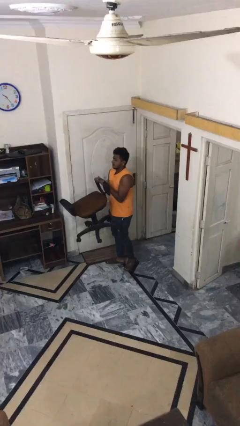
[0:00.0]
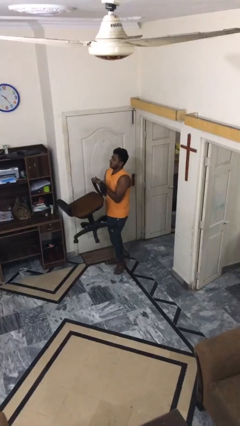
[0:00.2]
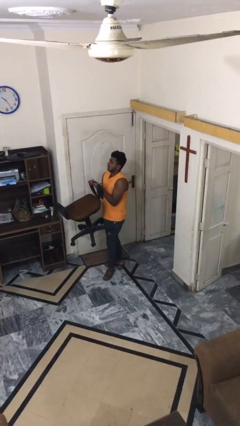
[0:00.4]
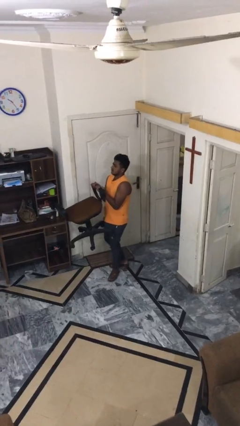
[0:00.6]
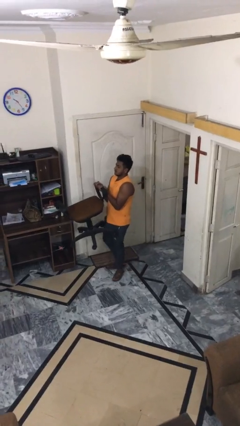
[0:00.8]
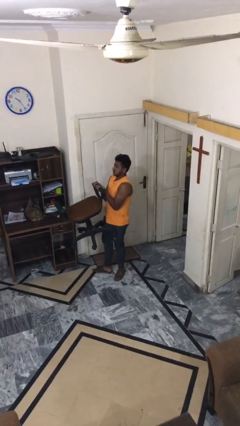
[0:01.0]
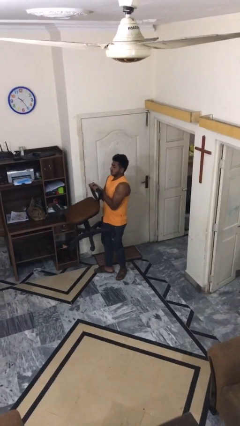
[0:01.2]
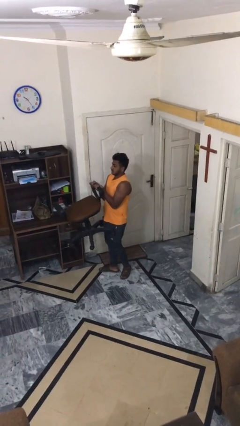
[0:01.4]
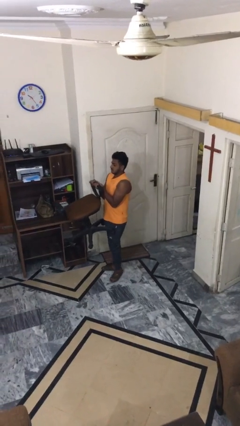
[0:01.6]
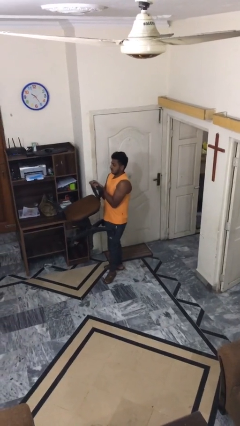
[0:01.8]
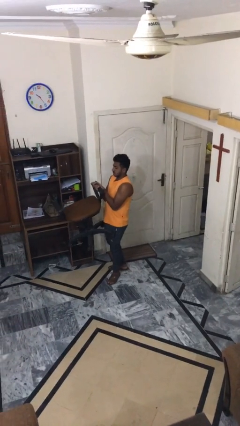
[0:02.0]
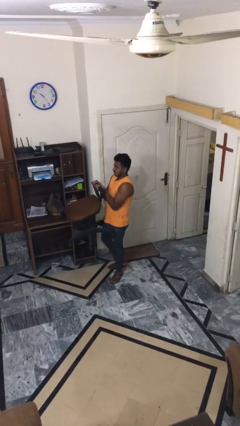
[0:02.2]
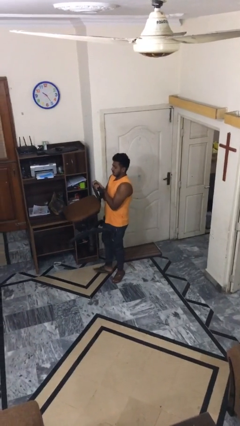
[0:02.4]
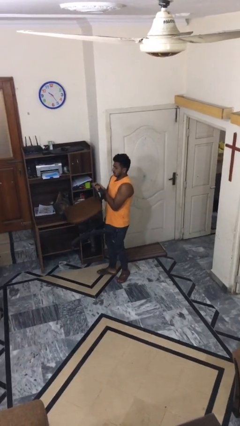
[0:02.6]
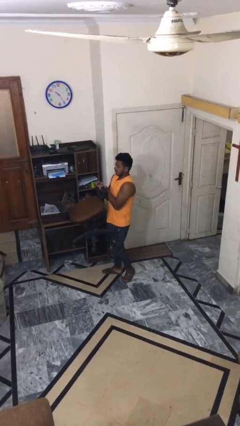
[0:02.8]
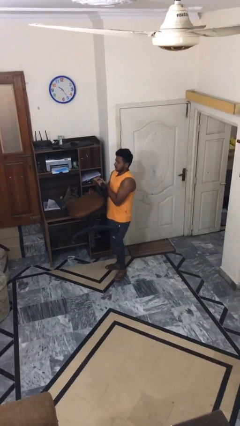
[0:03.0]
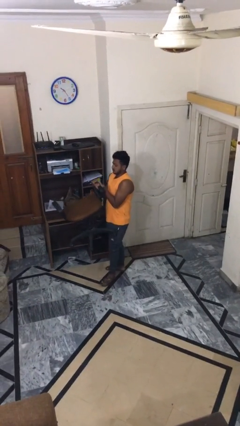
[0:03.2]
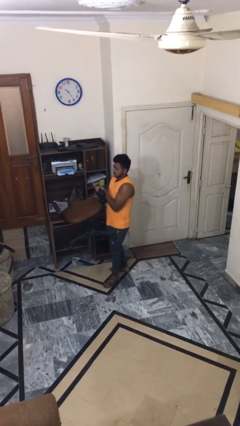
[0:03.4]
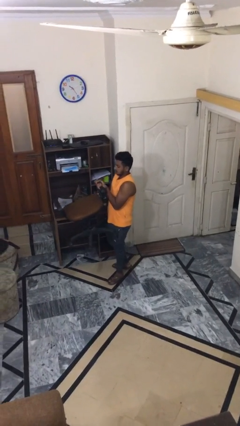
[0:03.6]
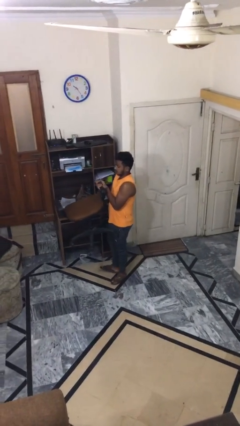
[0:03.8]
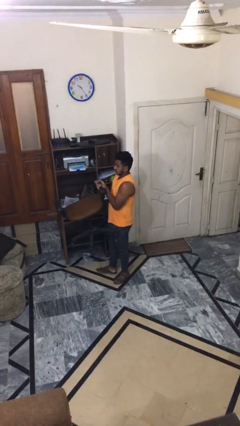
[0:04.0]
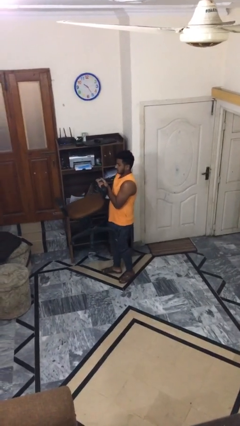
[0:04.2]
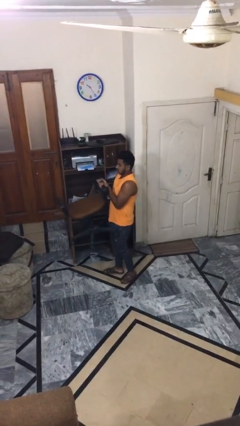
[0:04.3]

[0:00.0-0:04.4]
person carries heavy object

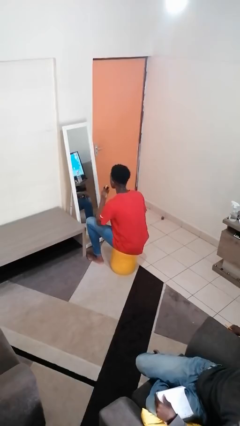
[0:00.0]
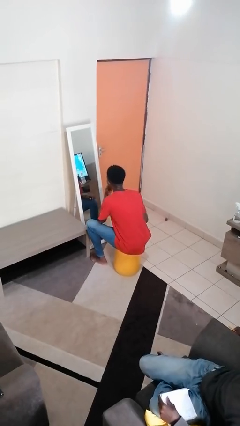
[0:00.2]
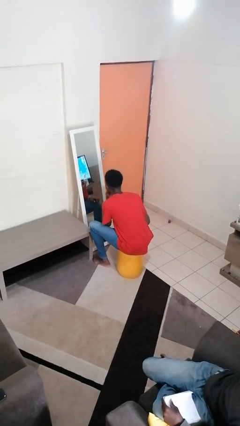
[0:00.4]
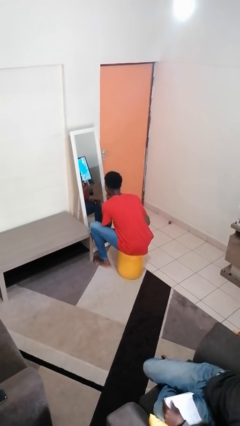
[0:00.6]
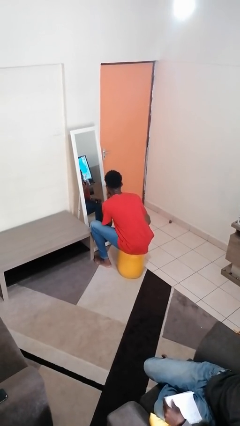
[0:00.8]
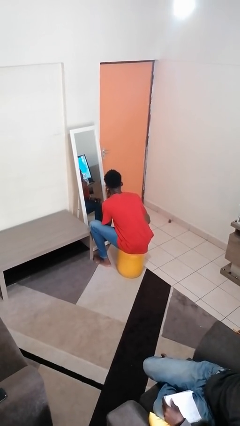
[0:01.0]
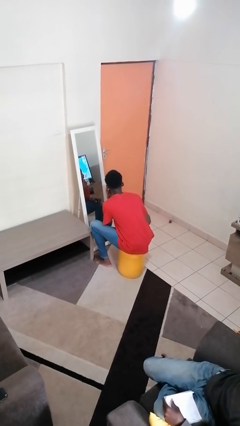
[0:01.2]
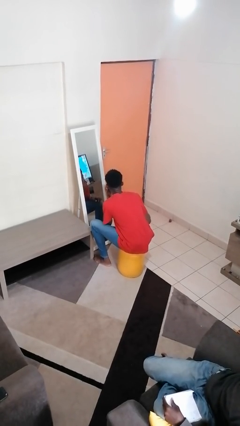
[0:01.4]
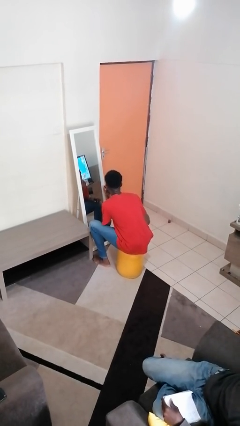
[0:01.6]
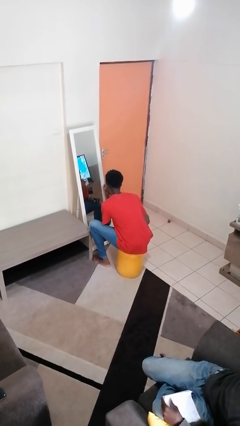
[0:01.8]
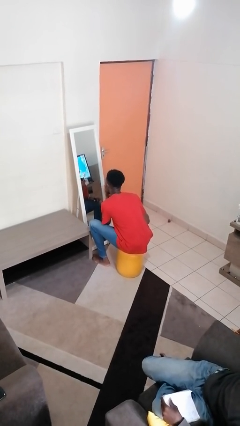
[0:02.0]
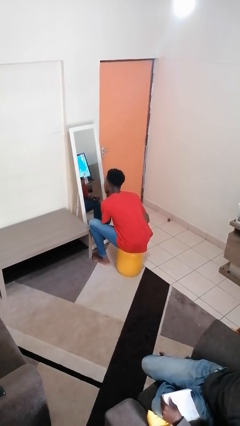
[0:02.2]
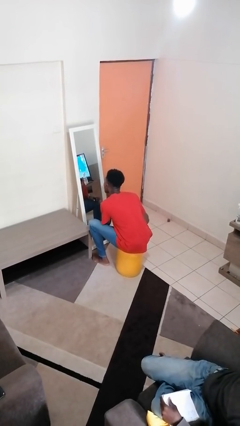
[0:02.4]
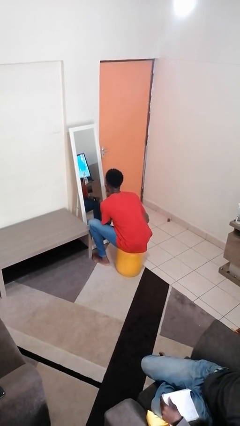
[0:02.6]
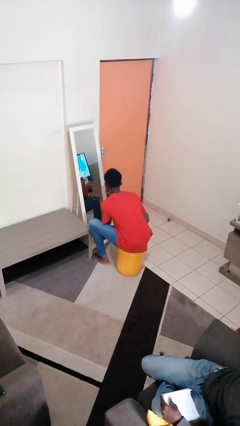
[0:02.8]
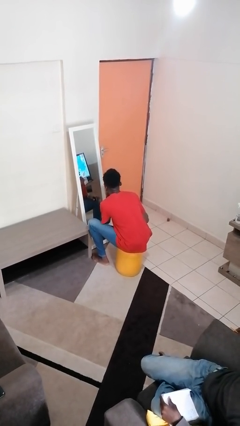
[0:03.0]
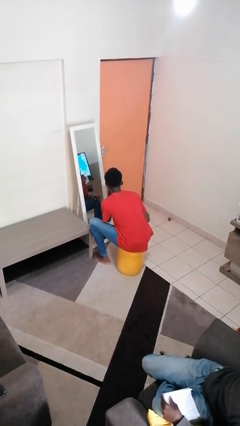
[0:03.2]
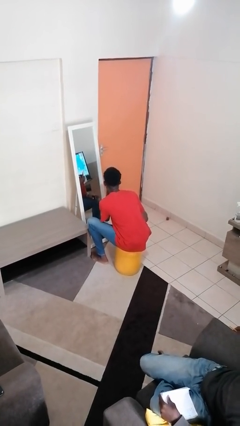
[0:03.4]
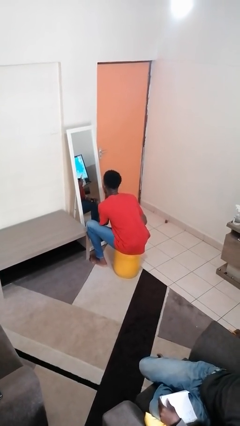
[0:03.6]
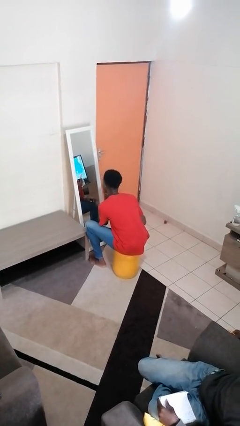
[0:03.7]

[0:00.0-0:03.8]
person applies lip makeup

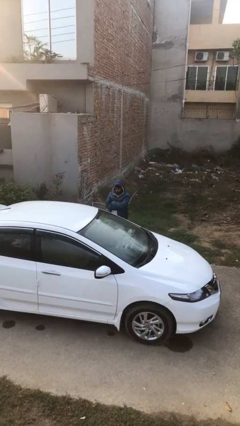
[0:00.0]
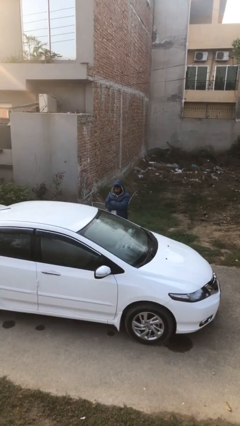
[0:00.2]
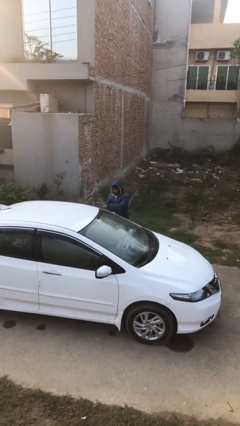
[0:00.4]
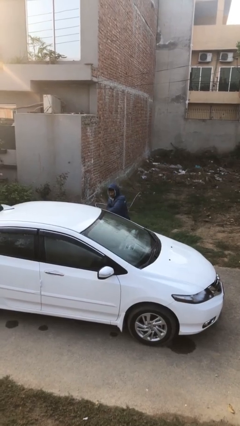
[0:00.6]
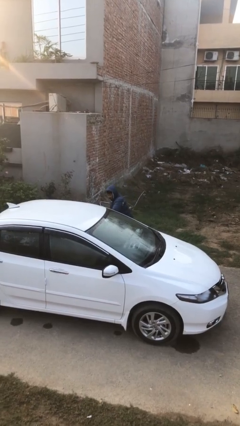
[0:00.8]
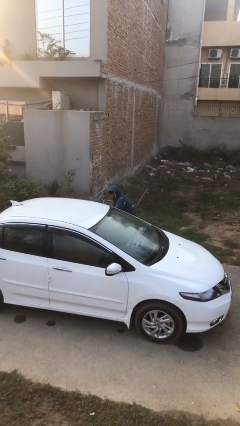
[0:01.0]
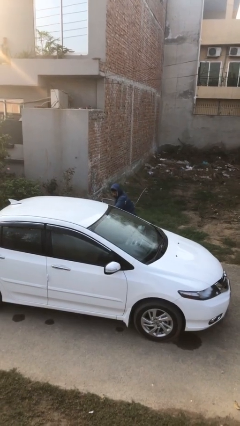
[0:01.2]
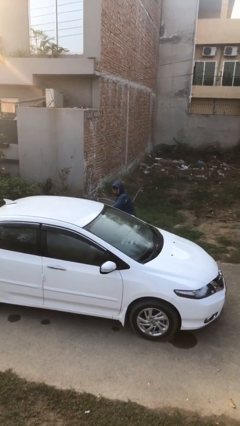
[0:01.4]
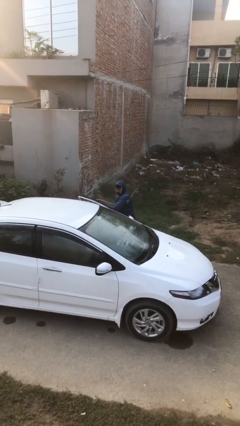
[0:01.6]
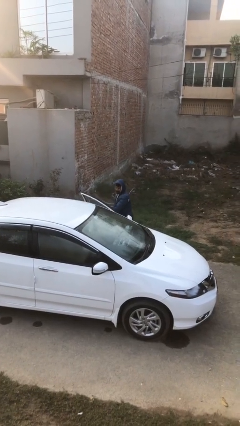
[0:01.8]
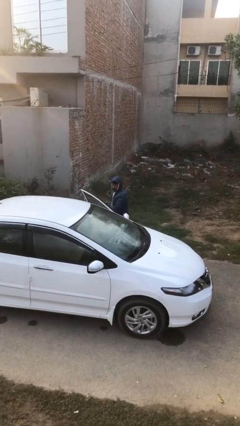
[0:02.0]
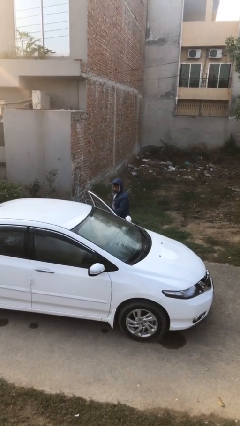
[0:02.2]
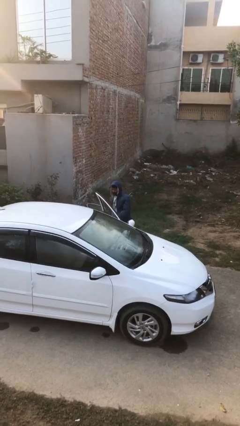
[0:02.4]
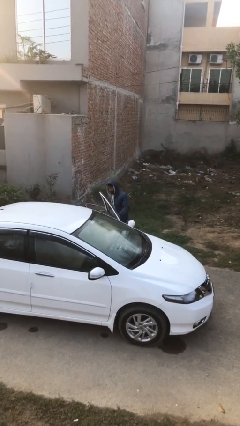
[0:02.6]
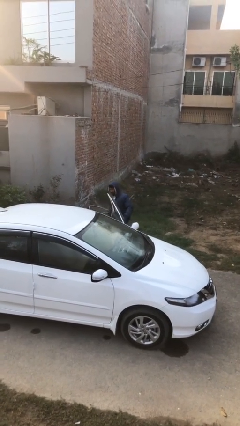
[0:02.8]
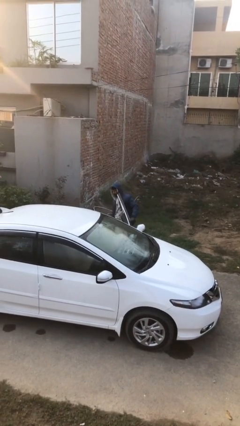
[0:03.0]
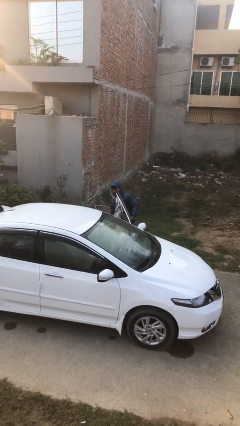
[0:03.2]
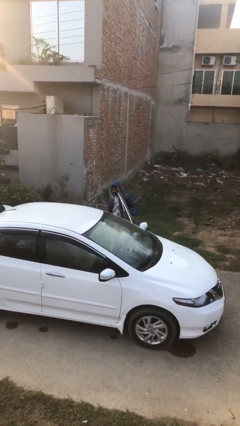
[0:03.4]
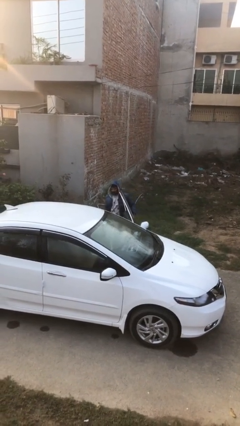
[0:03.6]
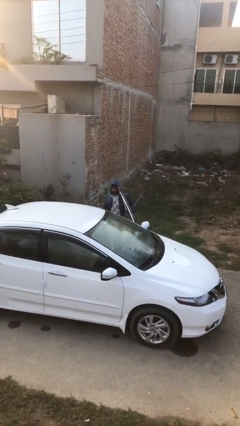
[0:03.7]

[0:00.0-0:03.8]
person opens car door

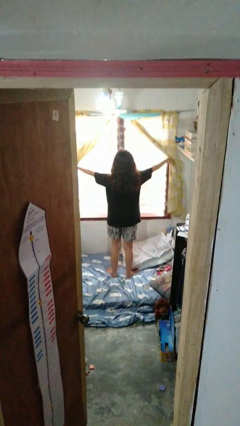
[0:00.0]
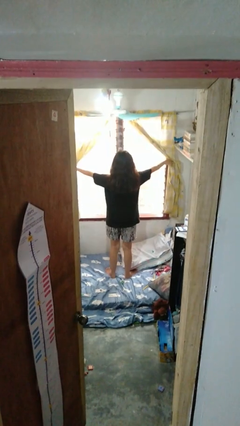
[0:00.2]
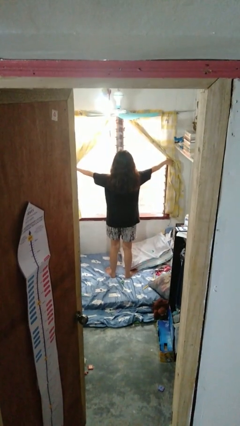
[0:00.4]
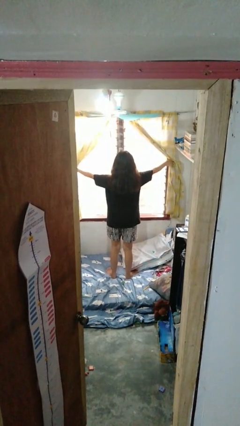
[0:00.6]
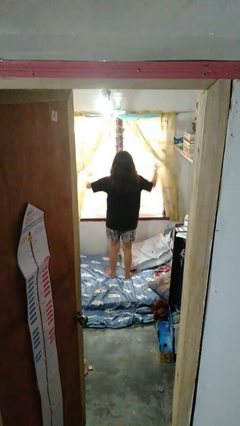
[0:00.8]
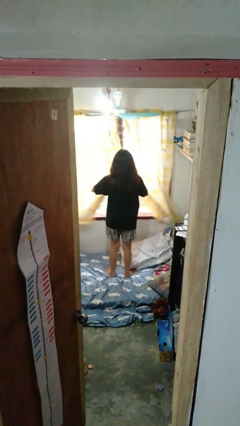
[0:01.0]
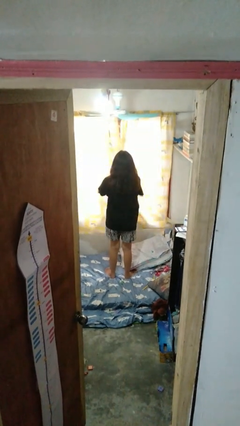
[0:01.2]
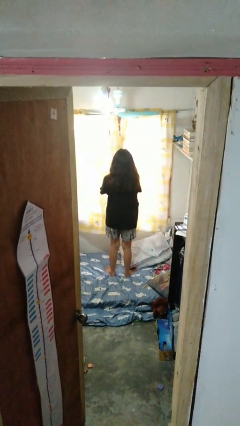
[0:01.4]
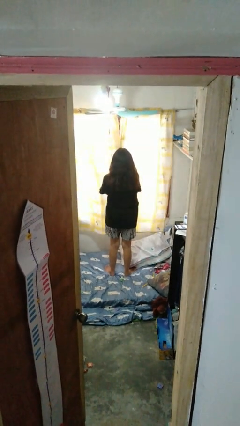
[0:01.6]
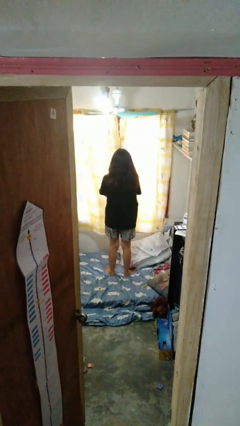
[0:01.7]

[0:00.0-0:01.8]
person closes curtains

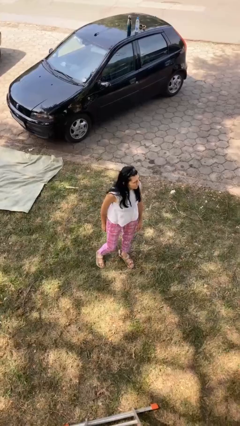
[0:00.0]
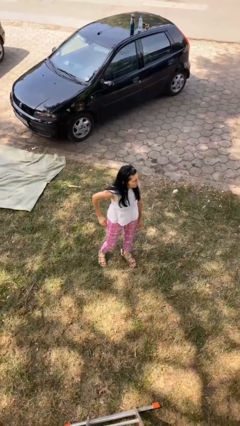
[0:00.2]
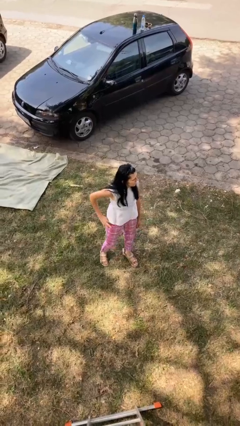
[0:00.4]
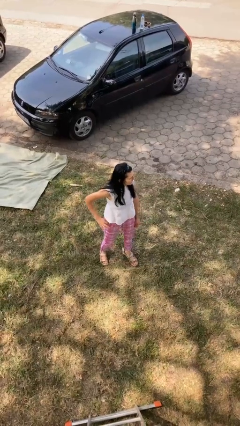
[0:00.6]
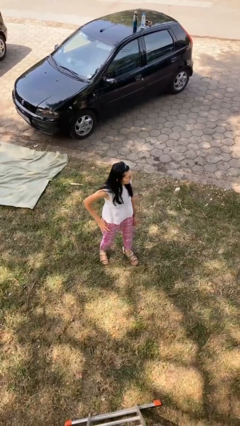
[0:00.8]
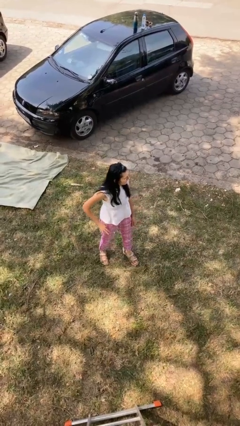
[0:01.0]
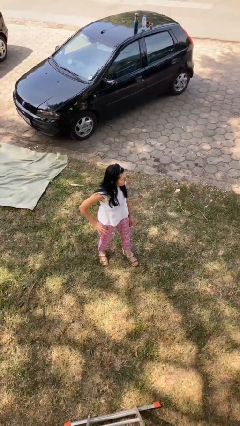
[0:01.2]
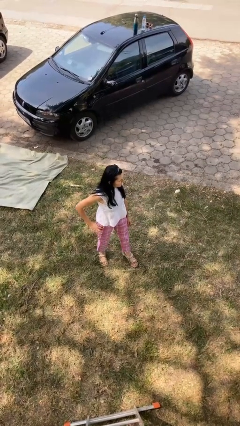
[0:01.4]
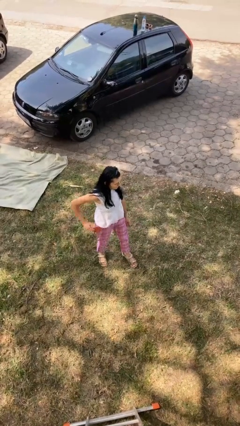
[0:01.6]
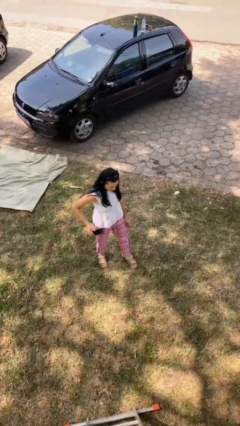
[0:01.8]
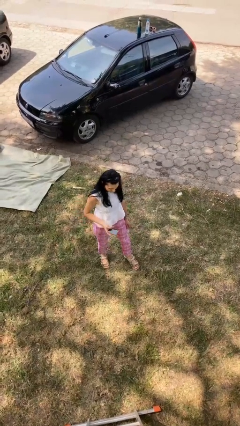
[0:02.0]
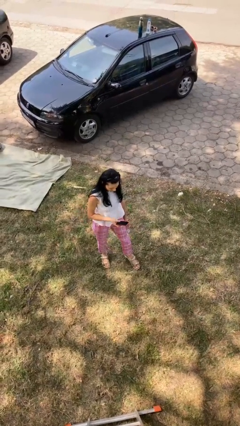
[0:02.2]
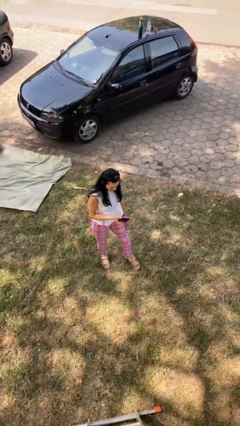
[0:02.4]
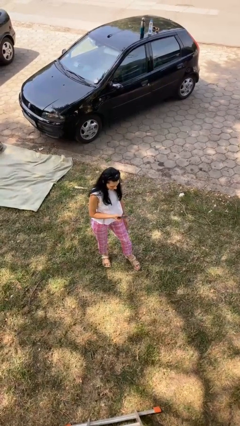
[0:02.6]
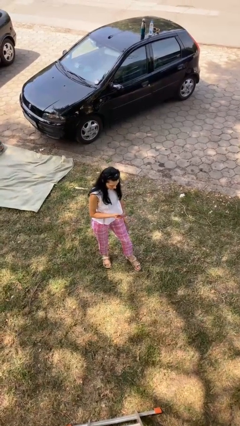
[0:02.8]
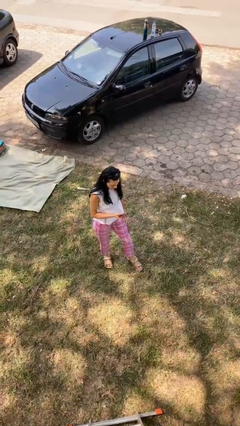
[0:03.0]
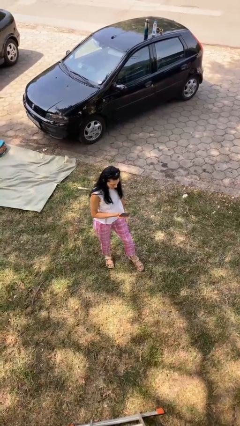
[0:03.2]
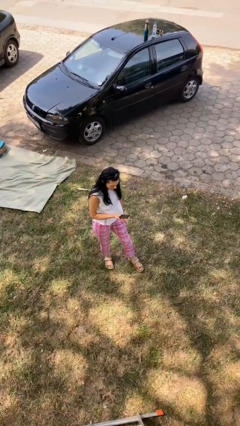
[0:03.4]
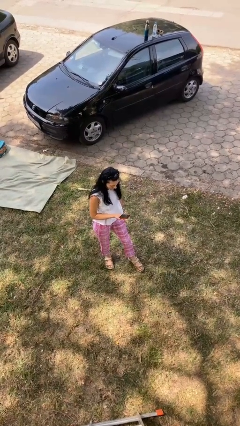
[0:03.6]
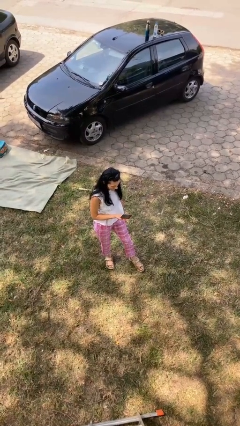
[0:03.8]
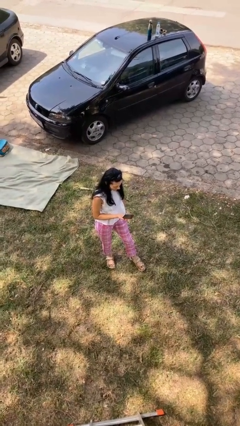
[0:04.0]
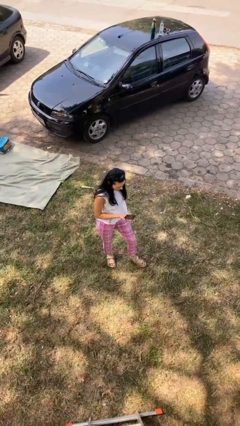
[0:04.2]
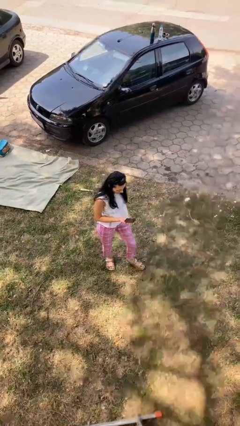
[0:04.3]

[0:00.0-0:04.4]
person takes phone from pocket
